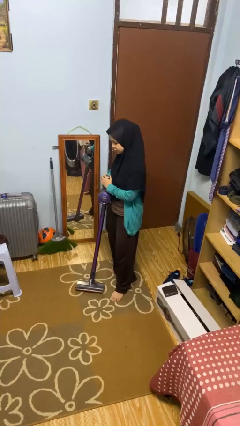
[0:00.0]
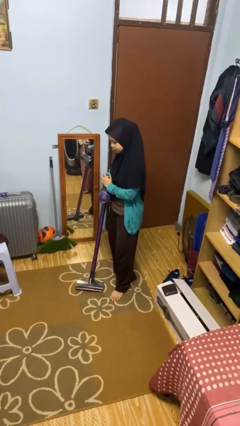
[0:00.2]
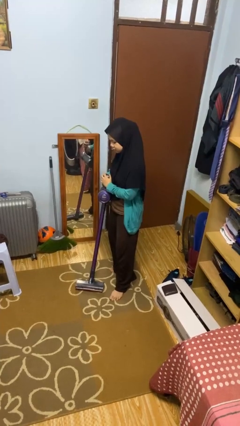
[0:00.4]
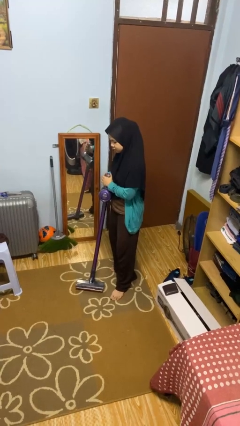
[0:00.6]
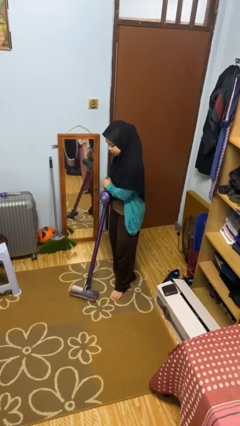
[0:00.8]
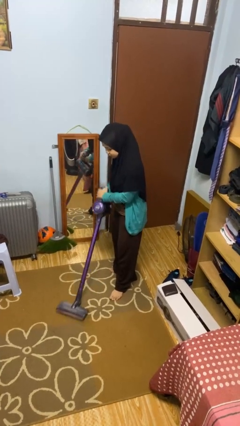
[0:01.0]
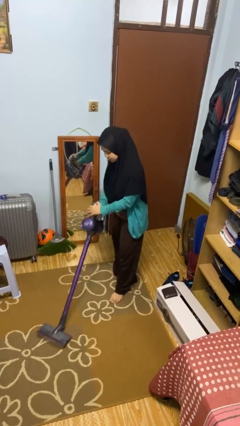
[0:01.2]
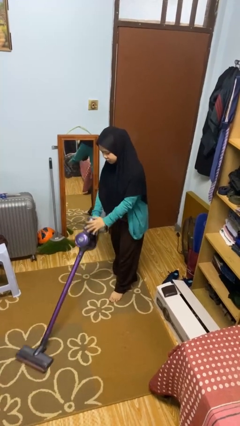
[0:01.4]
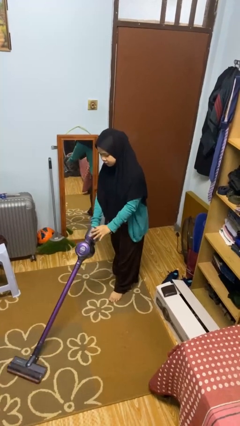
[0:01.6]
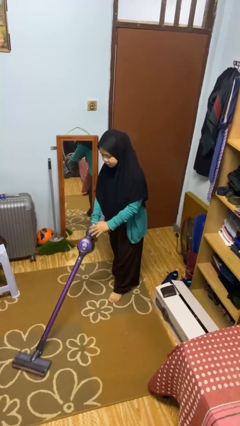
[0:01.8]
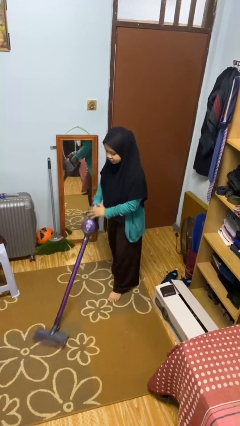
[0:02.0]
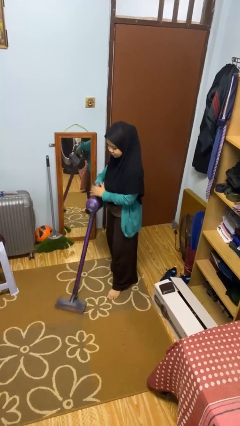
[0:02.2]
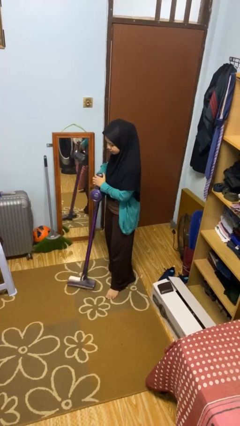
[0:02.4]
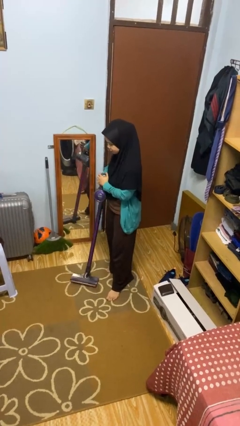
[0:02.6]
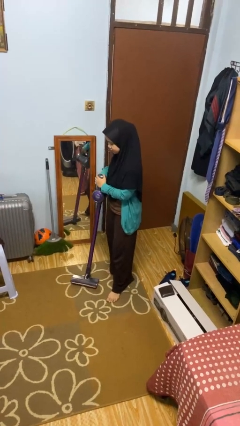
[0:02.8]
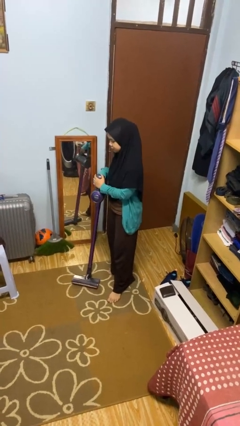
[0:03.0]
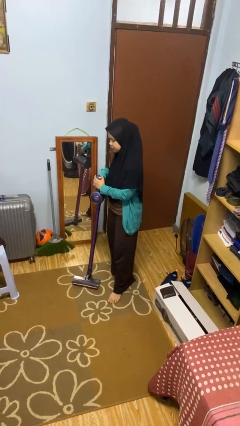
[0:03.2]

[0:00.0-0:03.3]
person vacuums carpet

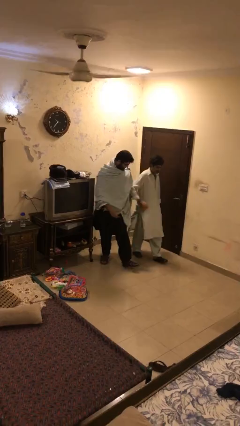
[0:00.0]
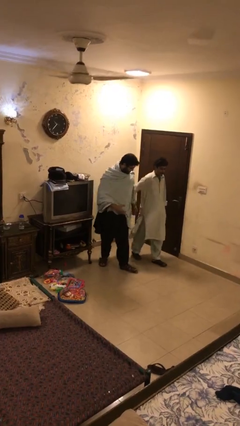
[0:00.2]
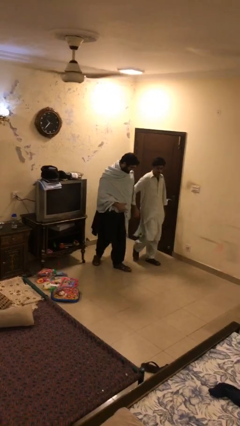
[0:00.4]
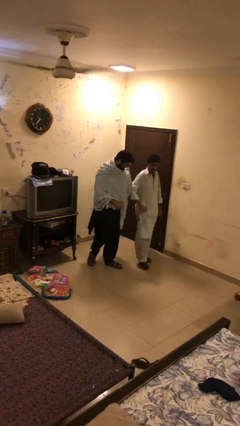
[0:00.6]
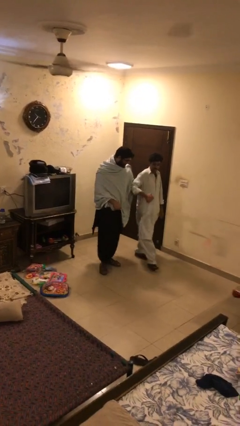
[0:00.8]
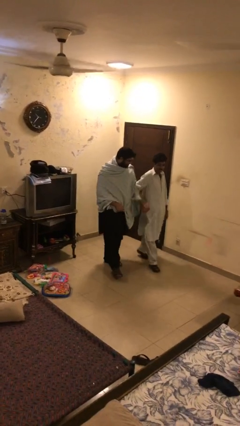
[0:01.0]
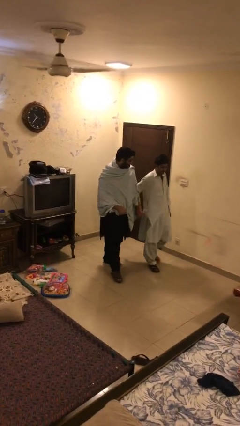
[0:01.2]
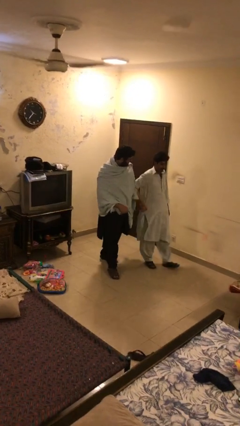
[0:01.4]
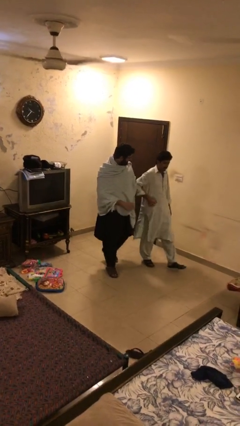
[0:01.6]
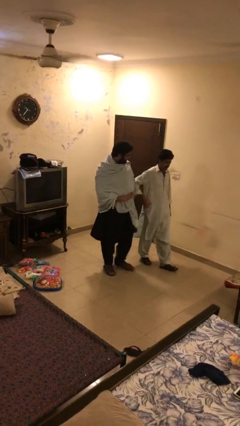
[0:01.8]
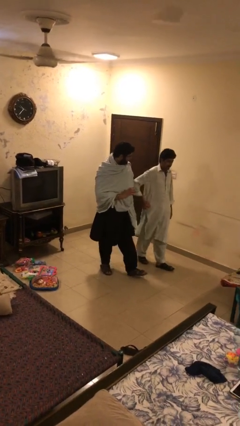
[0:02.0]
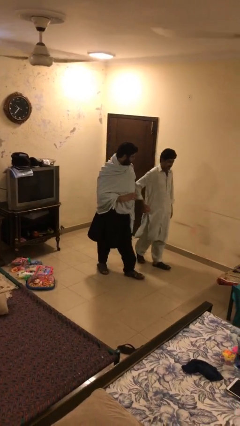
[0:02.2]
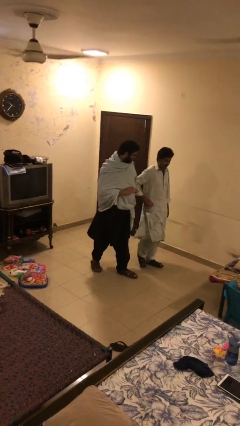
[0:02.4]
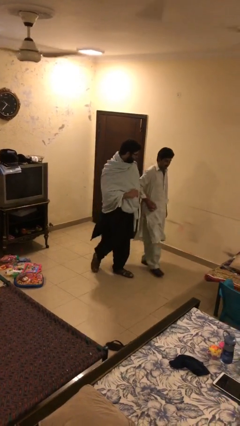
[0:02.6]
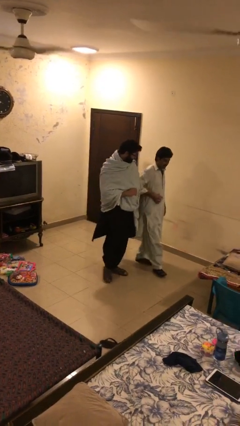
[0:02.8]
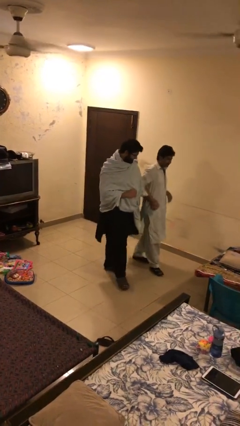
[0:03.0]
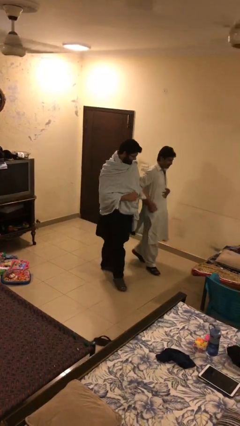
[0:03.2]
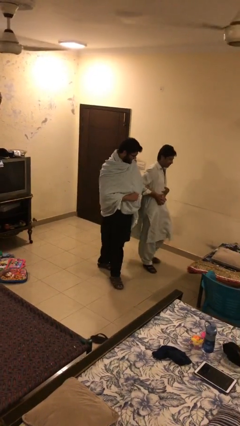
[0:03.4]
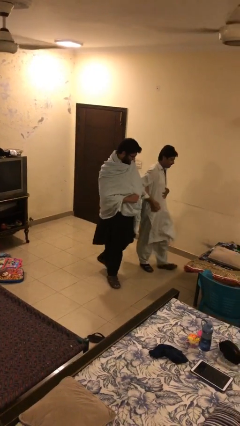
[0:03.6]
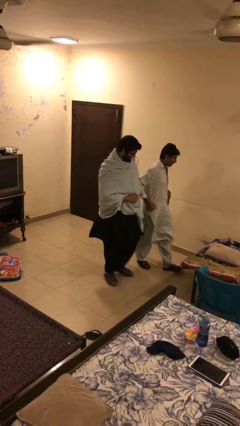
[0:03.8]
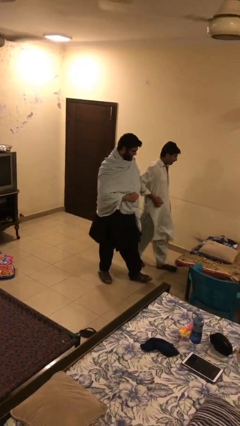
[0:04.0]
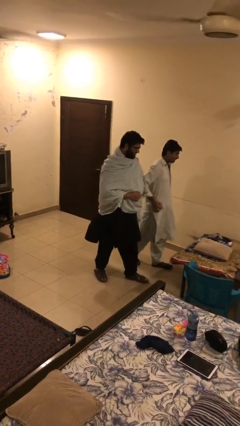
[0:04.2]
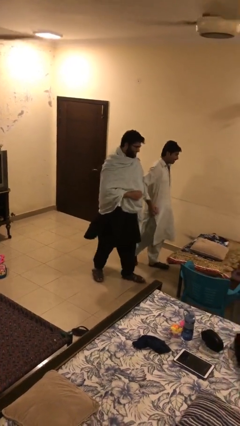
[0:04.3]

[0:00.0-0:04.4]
person holds hand

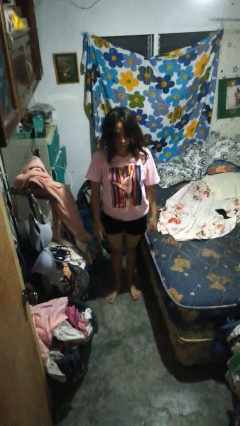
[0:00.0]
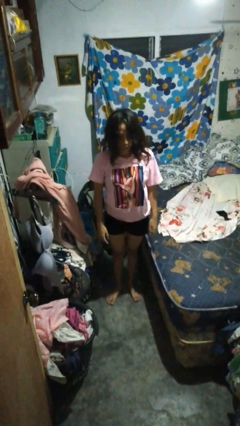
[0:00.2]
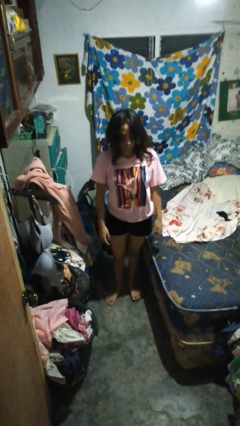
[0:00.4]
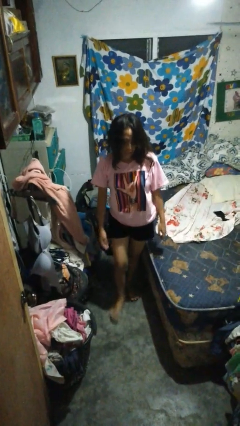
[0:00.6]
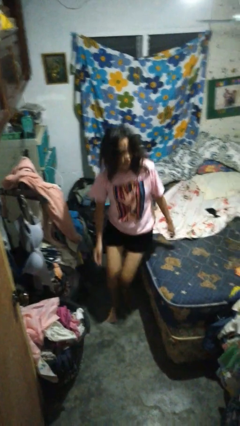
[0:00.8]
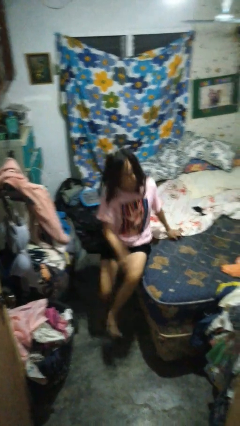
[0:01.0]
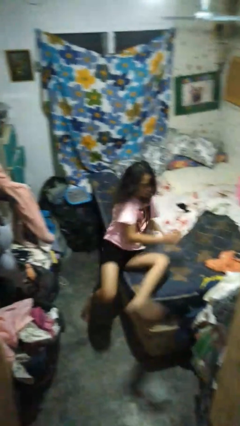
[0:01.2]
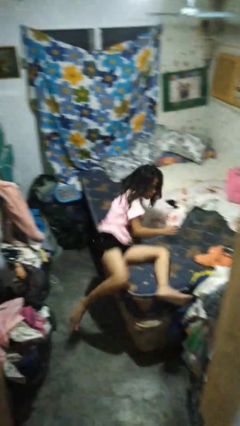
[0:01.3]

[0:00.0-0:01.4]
person lies down on bed

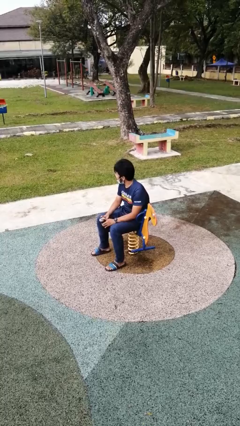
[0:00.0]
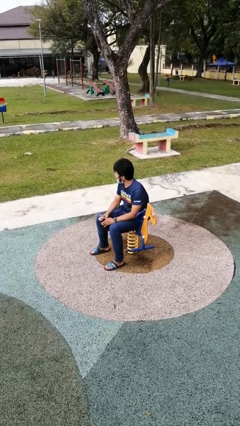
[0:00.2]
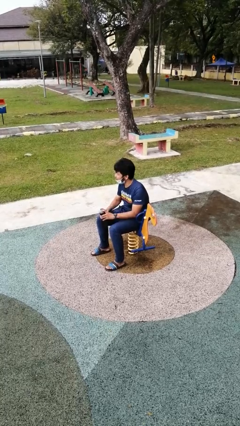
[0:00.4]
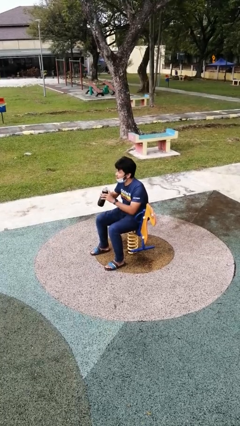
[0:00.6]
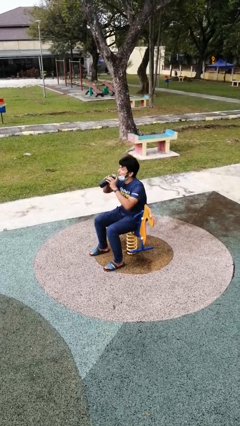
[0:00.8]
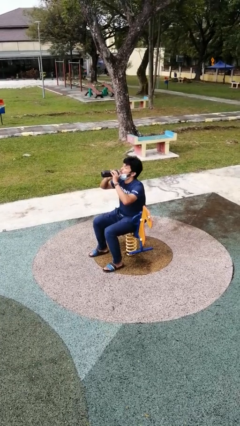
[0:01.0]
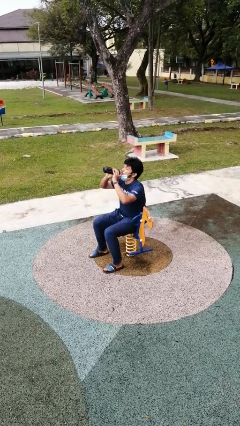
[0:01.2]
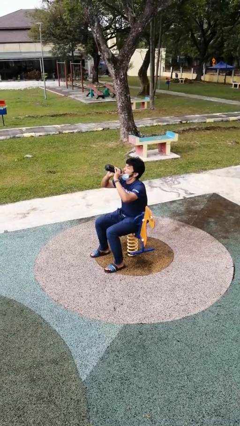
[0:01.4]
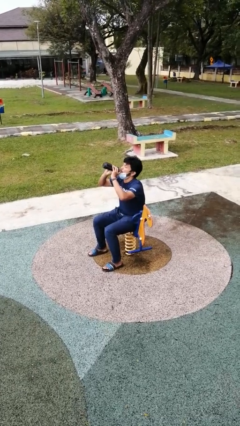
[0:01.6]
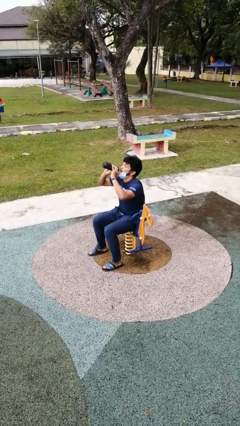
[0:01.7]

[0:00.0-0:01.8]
person drinks from bottle

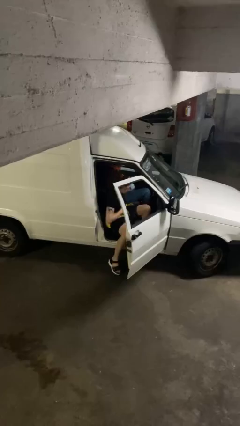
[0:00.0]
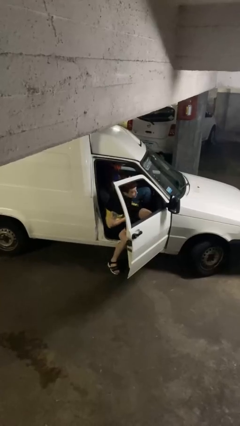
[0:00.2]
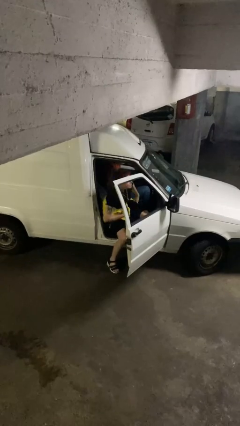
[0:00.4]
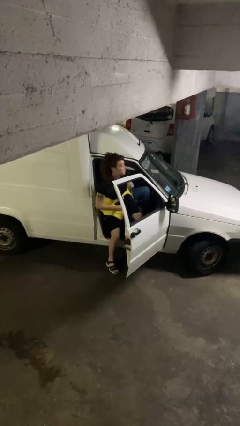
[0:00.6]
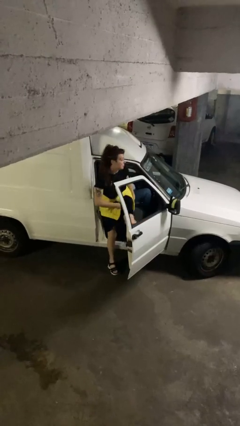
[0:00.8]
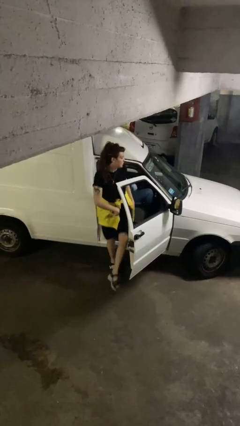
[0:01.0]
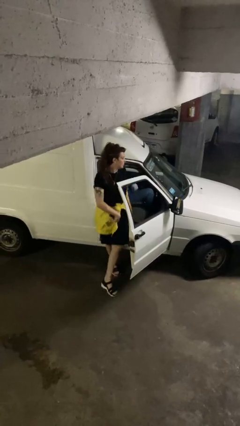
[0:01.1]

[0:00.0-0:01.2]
person exits car

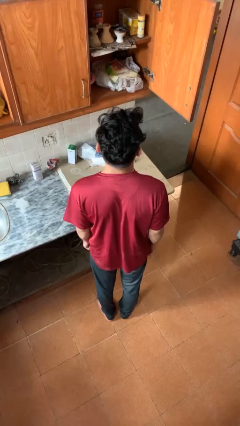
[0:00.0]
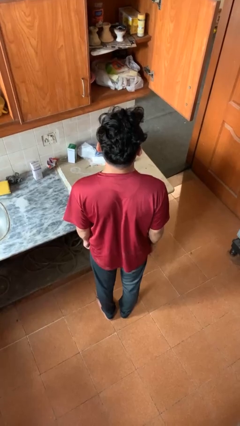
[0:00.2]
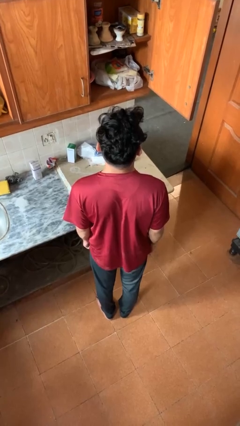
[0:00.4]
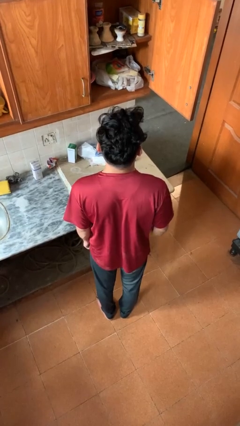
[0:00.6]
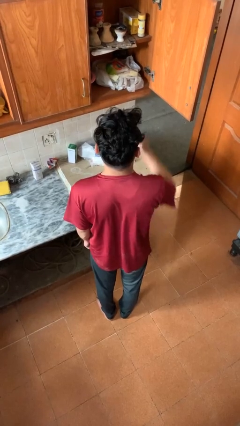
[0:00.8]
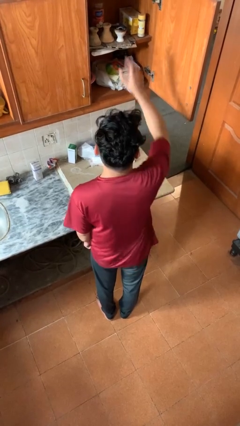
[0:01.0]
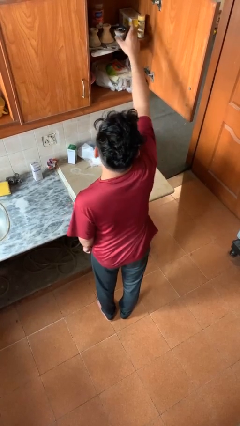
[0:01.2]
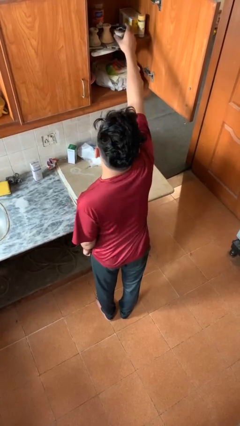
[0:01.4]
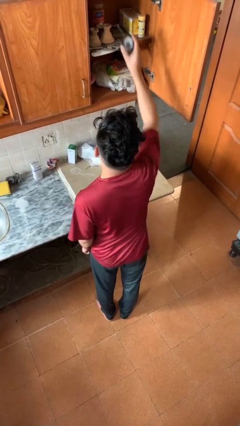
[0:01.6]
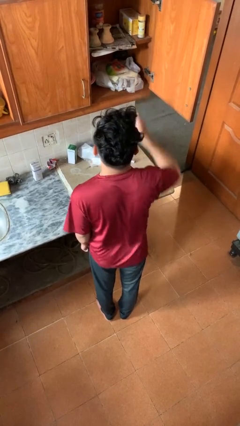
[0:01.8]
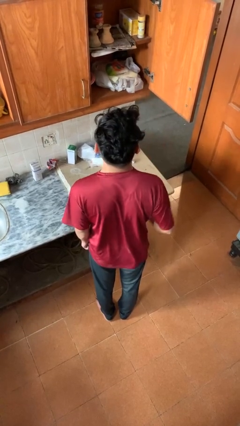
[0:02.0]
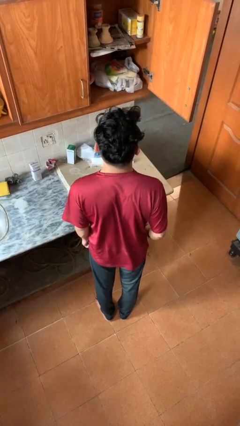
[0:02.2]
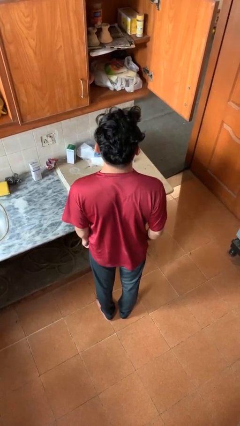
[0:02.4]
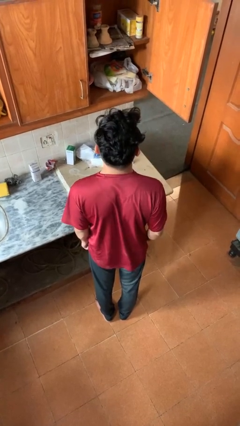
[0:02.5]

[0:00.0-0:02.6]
person takes object from cabinet

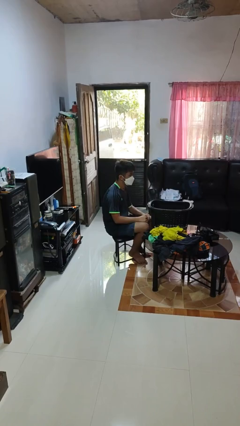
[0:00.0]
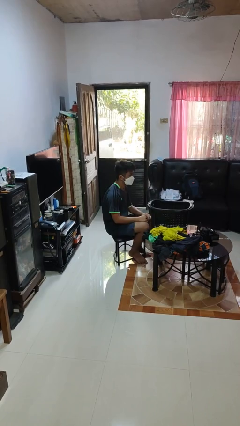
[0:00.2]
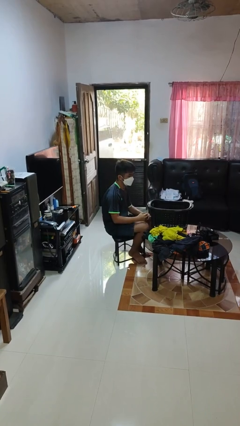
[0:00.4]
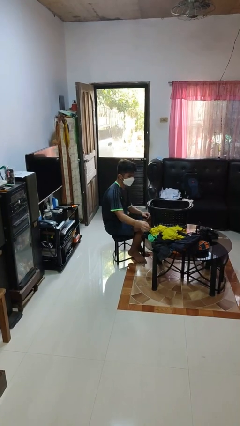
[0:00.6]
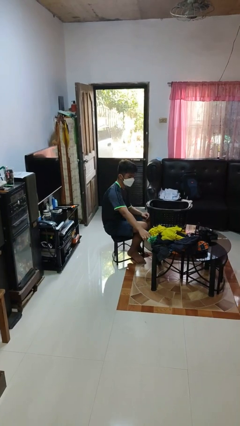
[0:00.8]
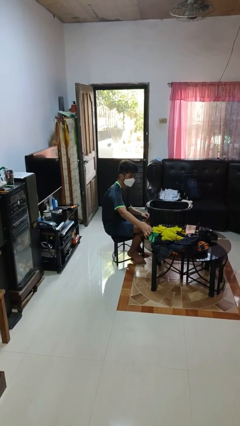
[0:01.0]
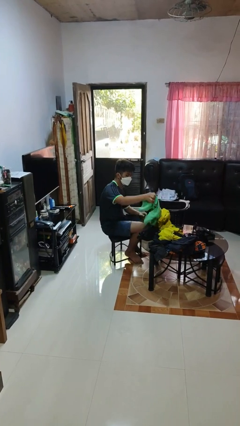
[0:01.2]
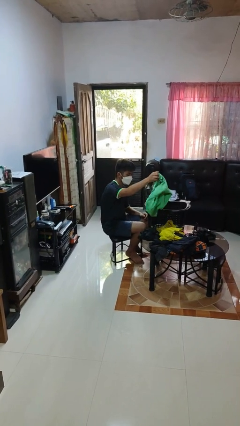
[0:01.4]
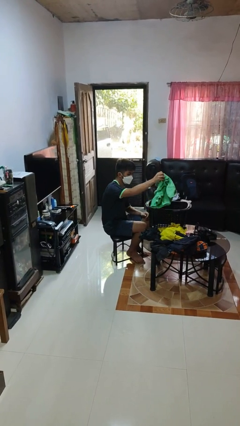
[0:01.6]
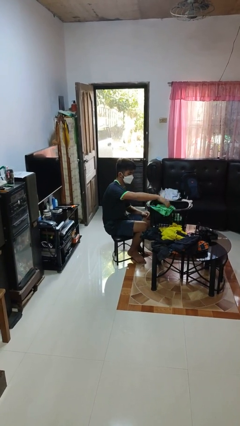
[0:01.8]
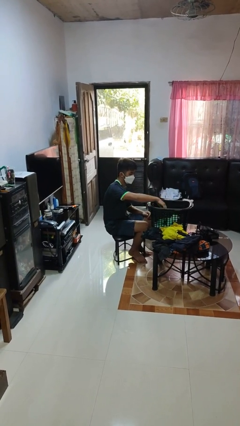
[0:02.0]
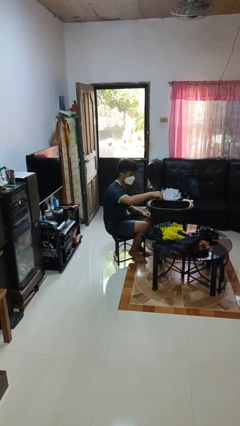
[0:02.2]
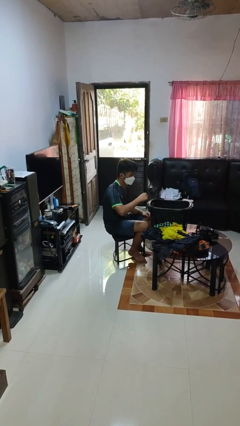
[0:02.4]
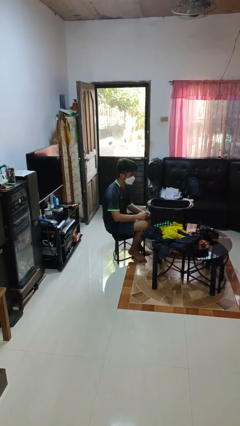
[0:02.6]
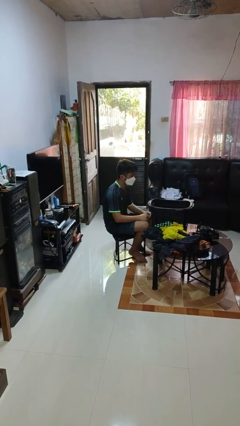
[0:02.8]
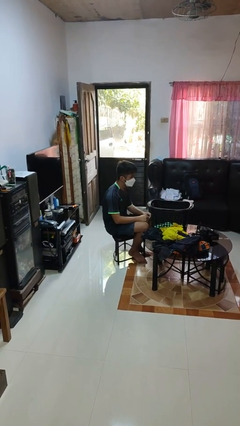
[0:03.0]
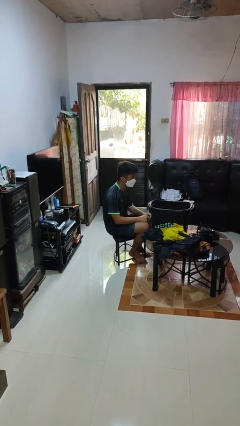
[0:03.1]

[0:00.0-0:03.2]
person puts object into basket
